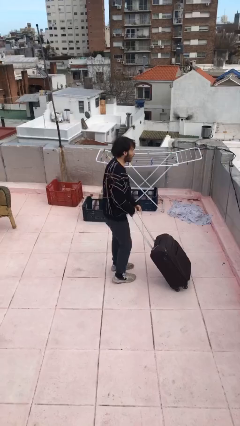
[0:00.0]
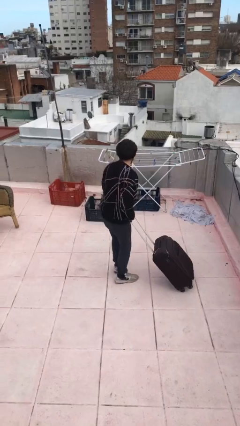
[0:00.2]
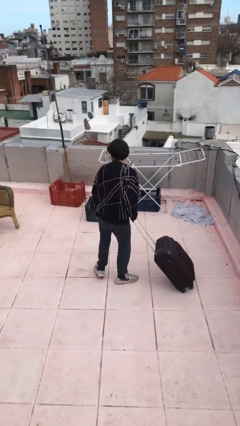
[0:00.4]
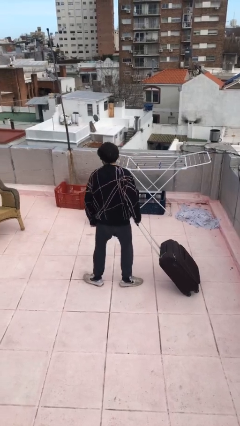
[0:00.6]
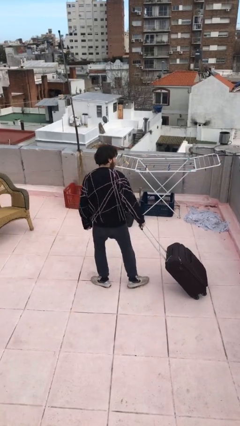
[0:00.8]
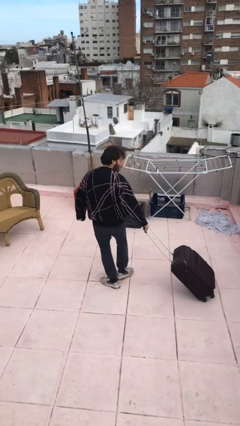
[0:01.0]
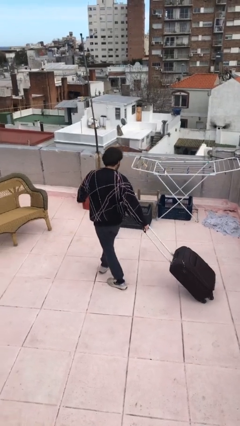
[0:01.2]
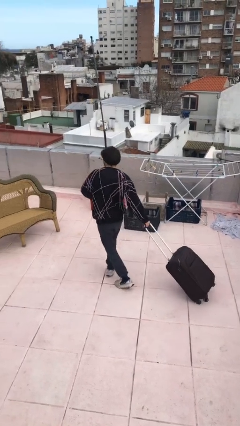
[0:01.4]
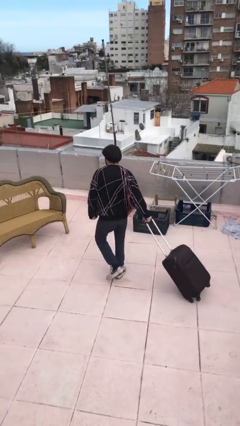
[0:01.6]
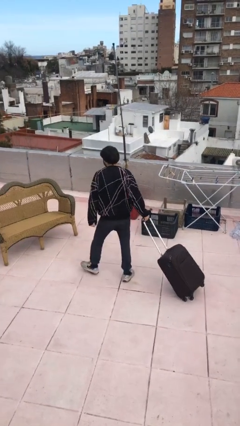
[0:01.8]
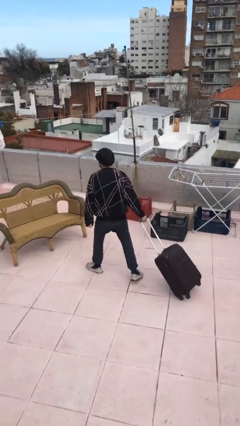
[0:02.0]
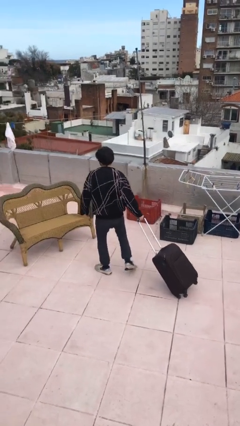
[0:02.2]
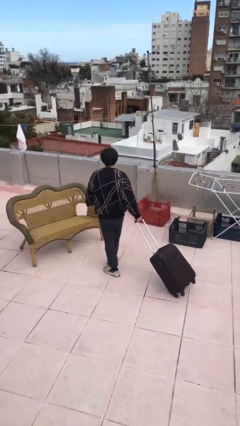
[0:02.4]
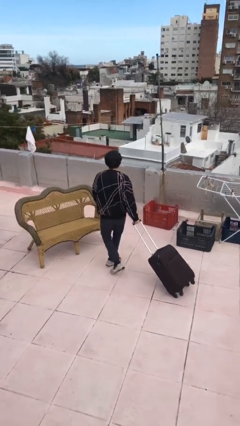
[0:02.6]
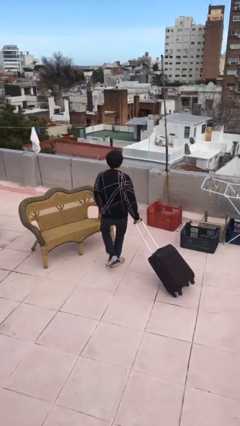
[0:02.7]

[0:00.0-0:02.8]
person pulls wheeled cart

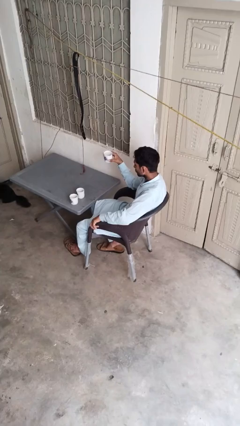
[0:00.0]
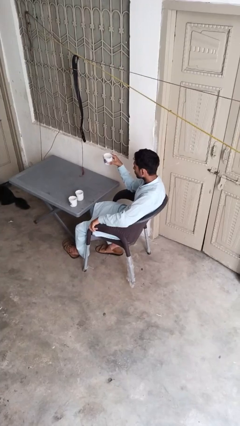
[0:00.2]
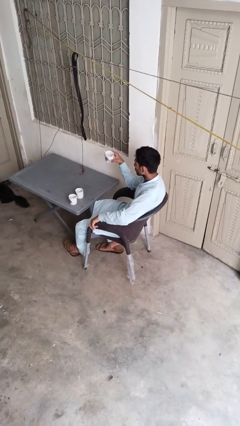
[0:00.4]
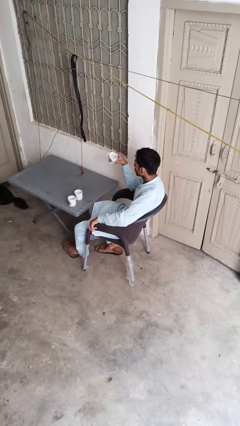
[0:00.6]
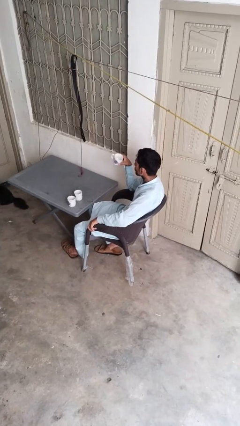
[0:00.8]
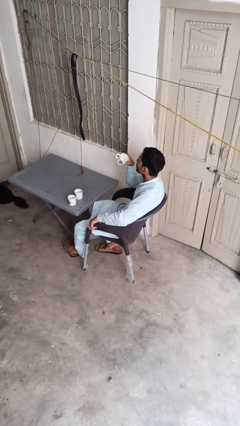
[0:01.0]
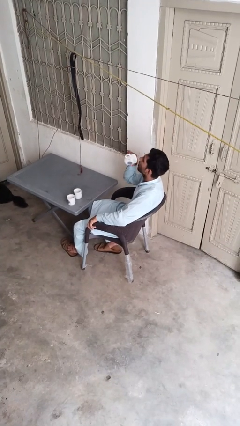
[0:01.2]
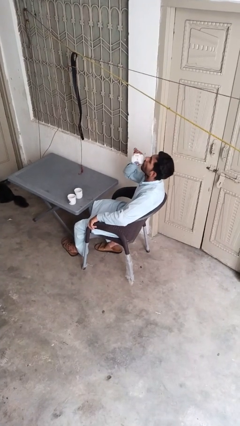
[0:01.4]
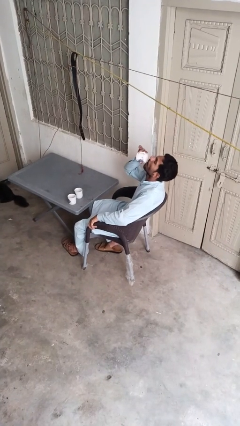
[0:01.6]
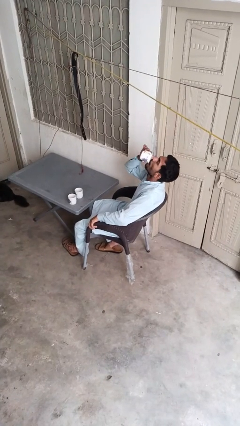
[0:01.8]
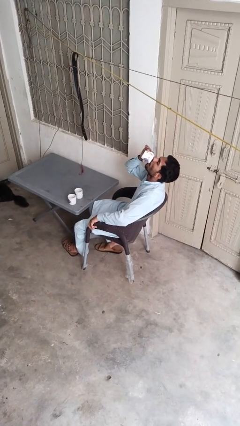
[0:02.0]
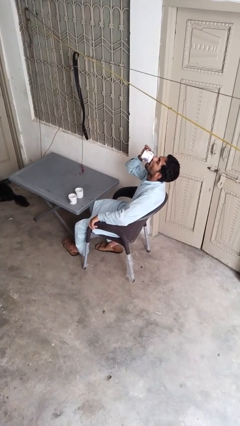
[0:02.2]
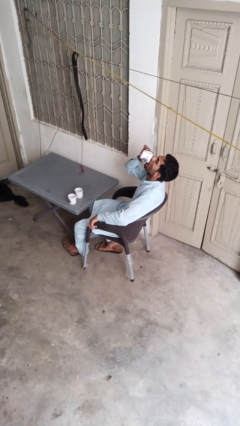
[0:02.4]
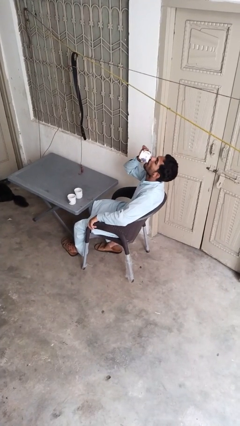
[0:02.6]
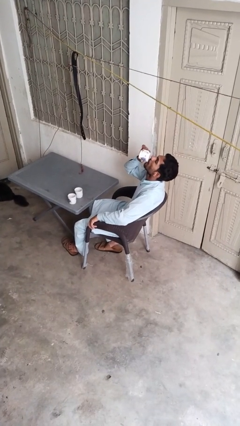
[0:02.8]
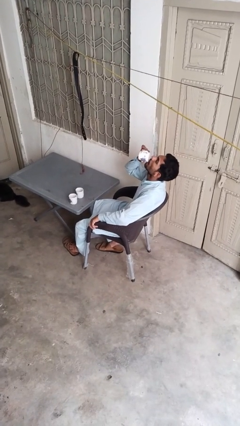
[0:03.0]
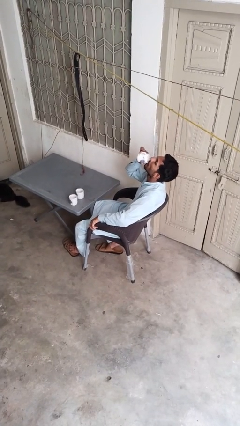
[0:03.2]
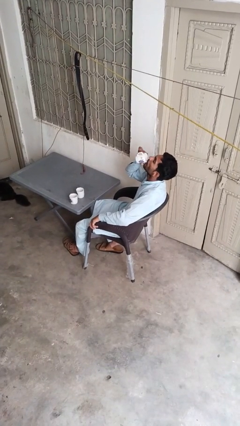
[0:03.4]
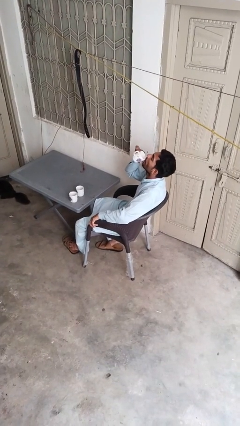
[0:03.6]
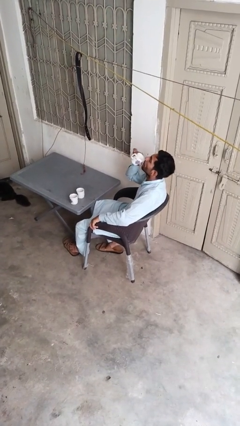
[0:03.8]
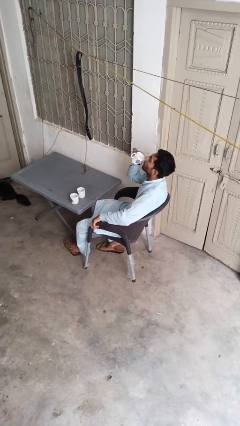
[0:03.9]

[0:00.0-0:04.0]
person drinks from shotglass

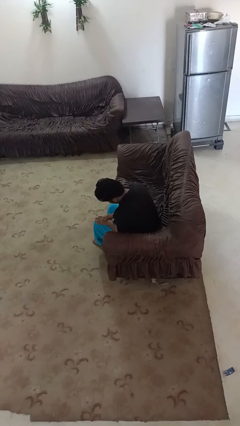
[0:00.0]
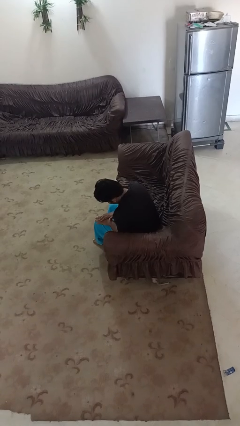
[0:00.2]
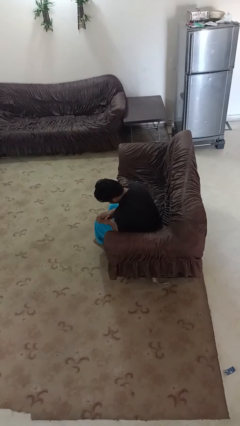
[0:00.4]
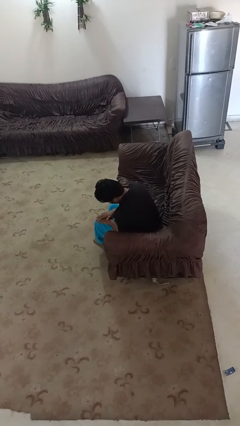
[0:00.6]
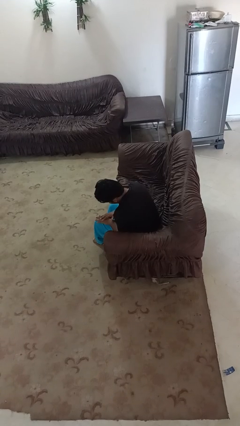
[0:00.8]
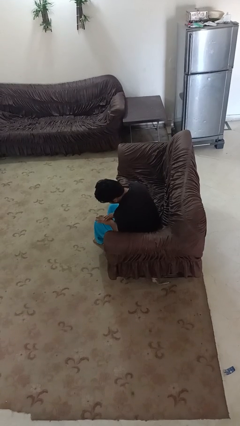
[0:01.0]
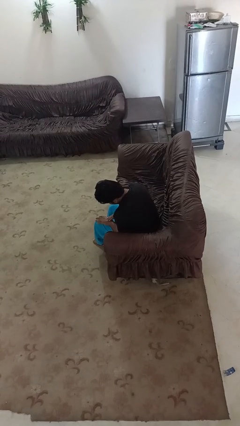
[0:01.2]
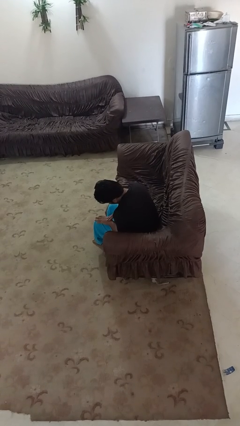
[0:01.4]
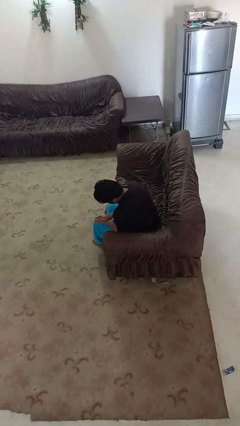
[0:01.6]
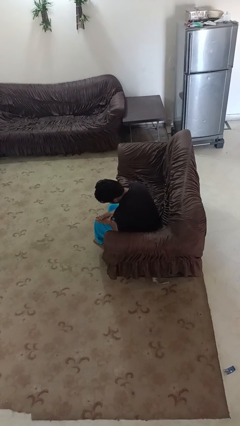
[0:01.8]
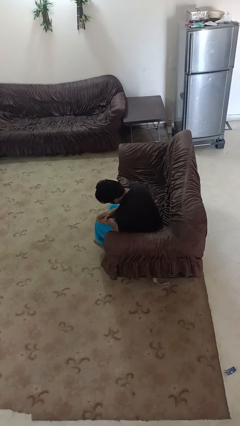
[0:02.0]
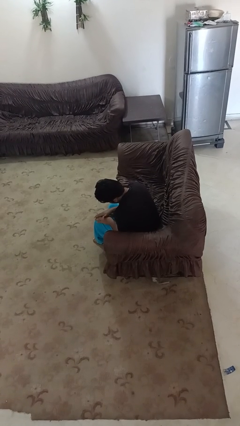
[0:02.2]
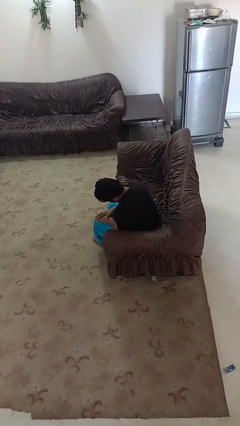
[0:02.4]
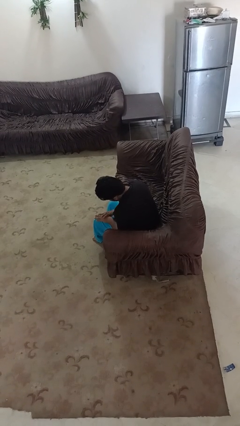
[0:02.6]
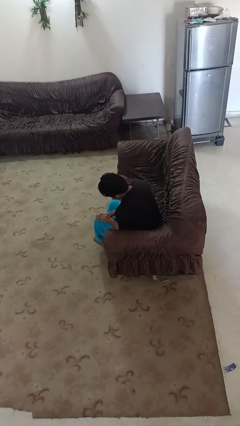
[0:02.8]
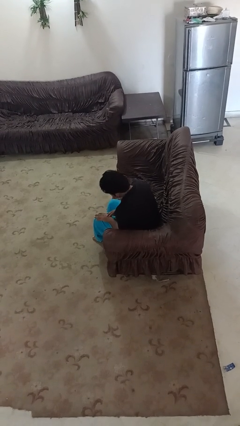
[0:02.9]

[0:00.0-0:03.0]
person looks at hands in lap

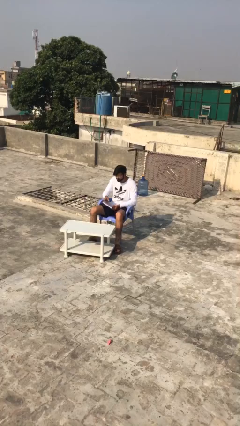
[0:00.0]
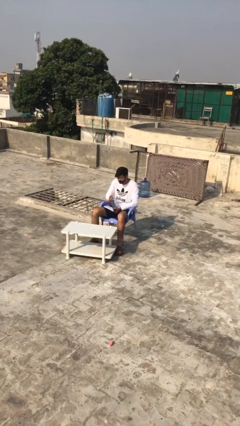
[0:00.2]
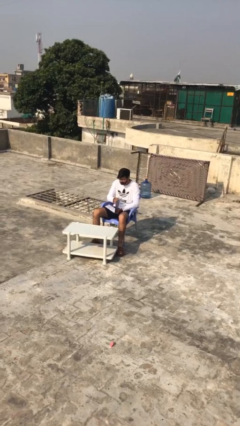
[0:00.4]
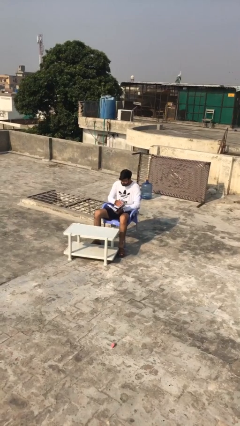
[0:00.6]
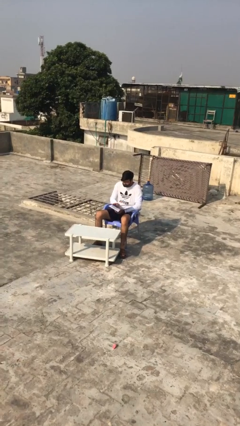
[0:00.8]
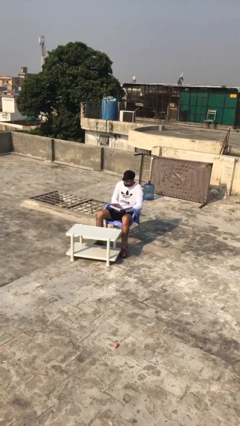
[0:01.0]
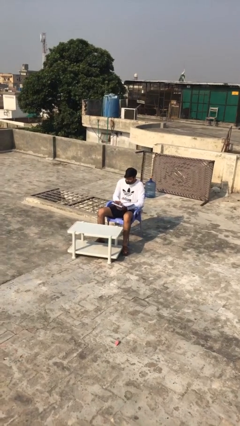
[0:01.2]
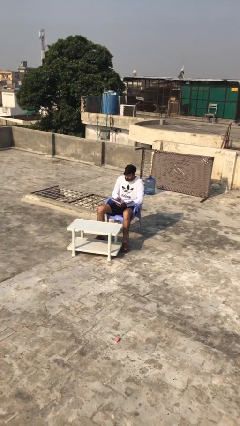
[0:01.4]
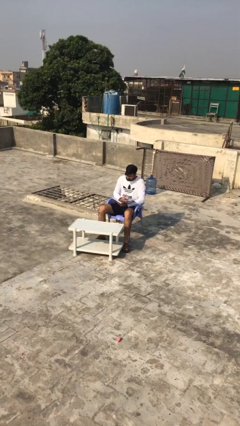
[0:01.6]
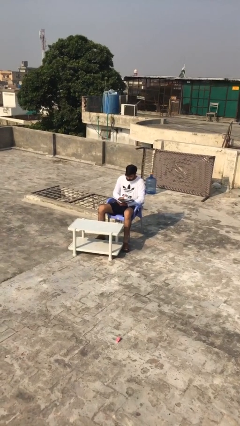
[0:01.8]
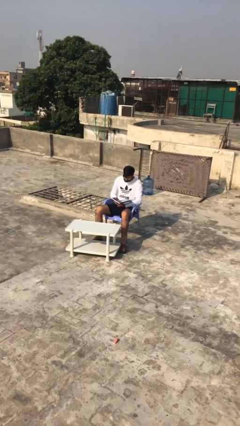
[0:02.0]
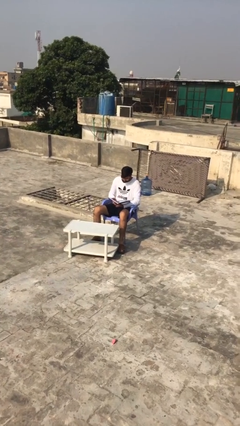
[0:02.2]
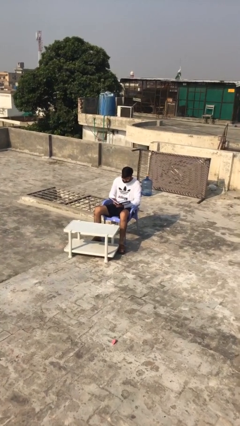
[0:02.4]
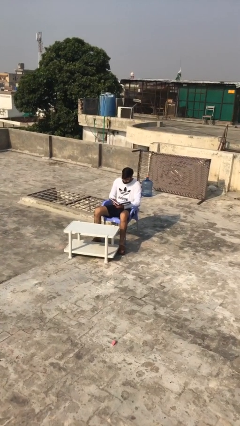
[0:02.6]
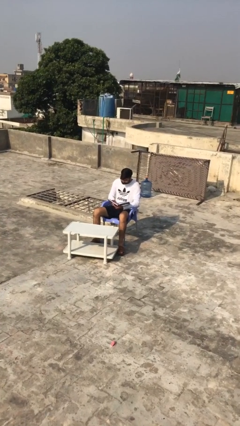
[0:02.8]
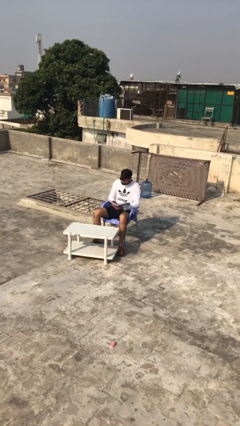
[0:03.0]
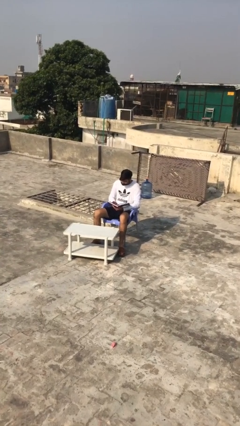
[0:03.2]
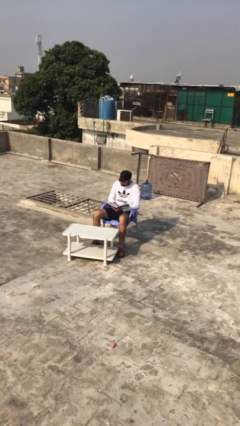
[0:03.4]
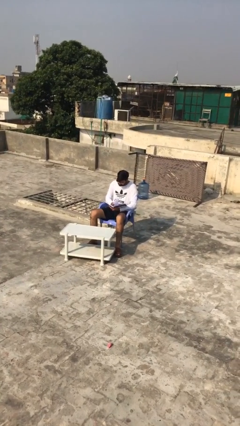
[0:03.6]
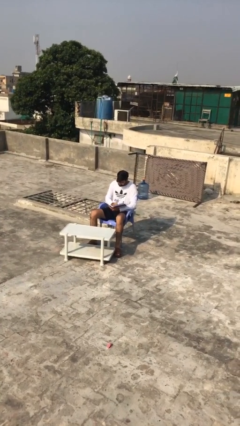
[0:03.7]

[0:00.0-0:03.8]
person reads document

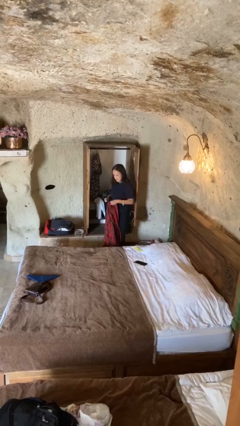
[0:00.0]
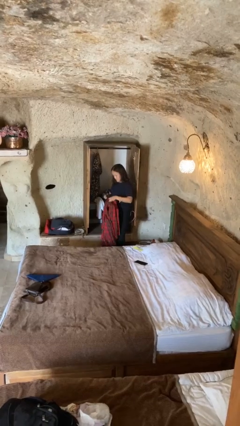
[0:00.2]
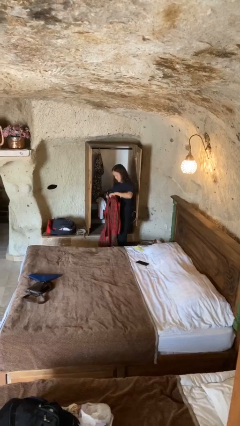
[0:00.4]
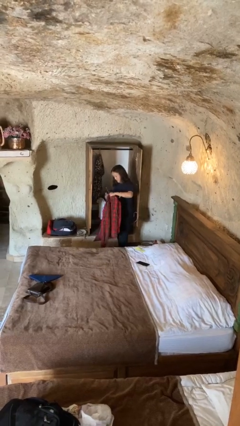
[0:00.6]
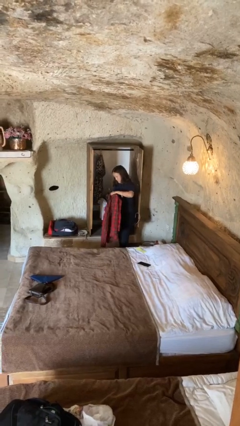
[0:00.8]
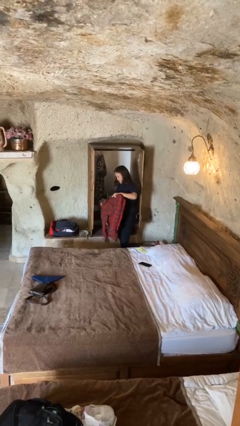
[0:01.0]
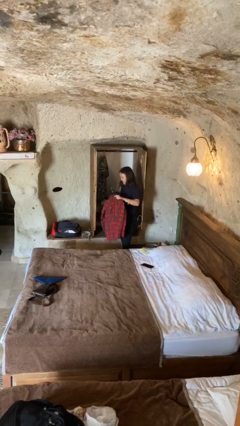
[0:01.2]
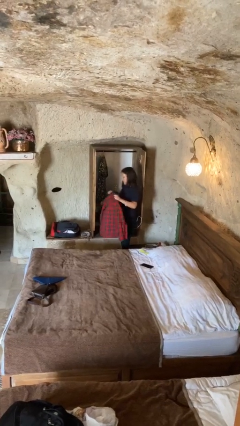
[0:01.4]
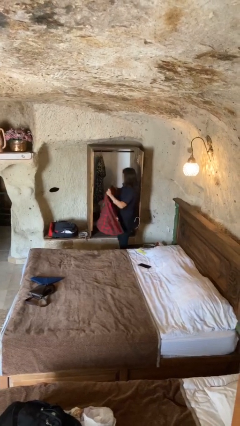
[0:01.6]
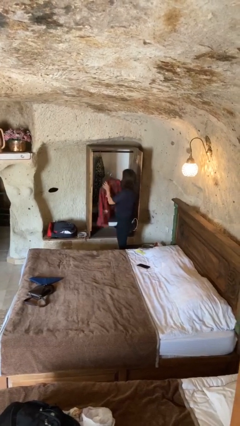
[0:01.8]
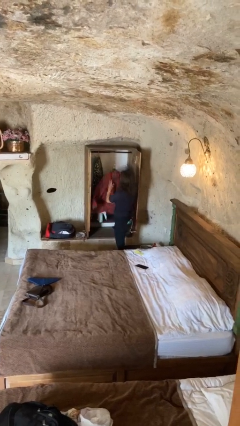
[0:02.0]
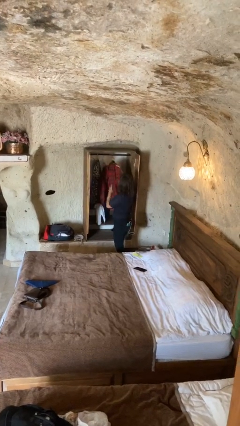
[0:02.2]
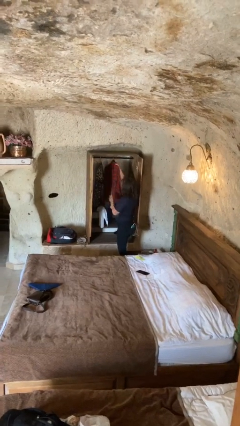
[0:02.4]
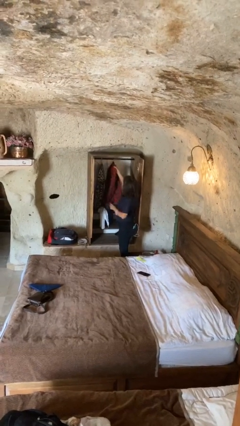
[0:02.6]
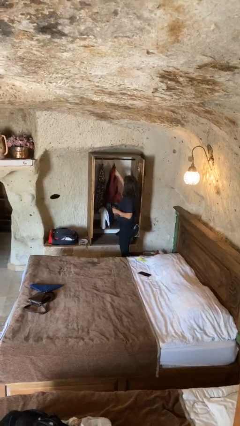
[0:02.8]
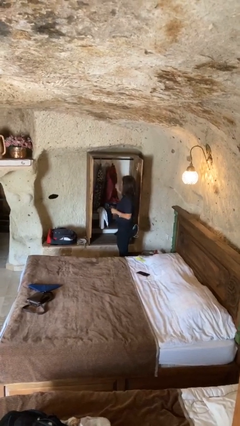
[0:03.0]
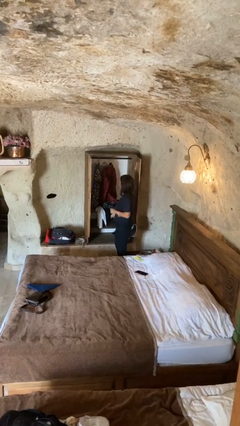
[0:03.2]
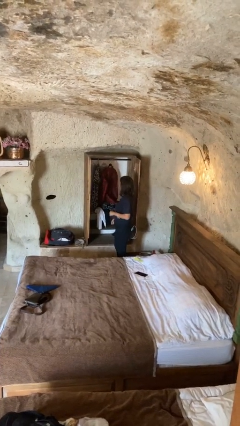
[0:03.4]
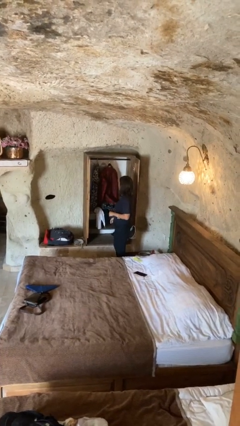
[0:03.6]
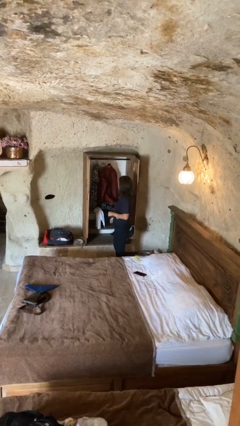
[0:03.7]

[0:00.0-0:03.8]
person puts clothes into closet

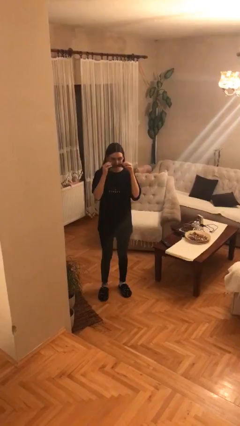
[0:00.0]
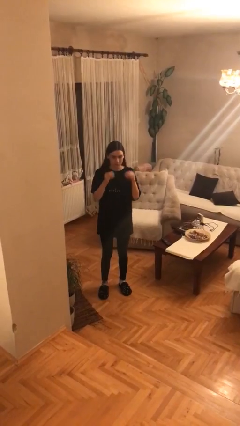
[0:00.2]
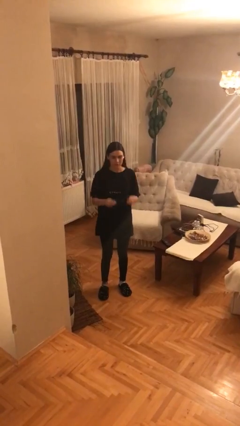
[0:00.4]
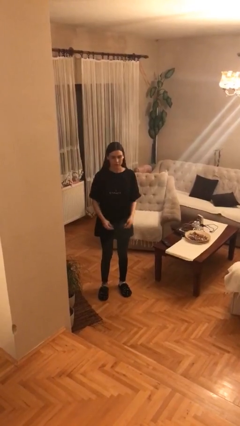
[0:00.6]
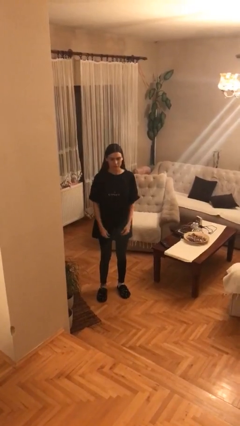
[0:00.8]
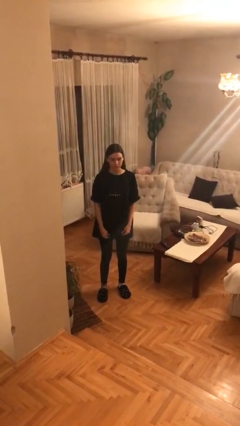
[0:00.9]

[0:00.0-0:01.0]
person takes off sunglasses
